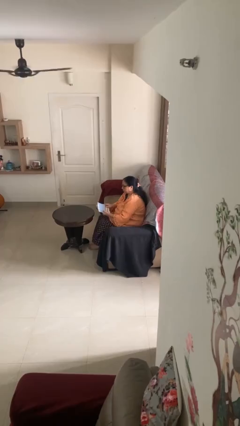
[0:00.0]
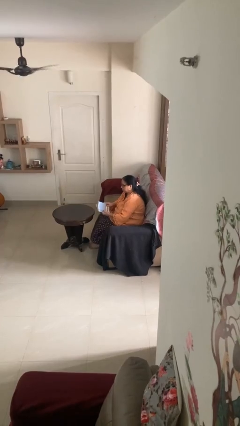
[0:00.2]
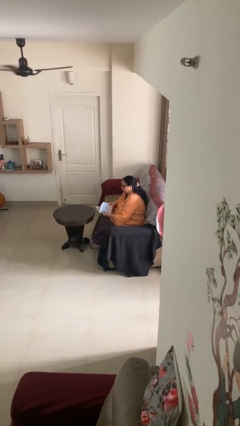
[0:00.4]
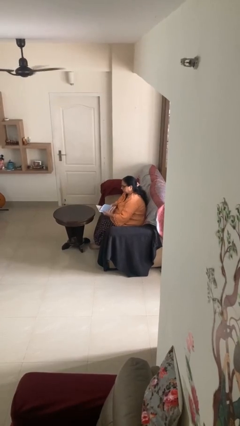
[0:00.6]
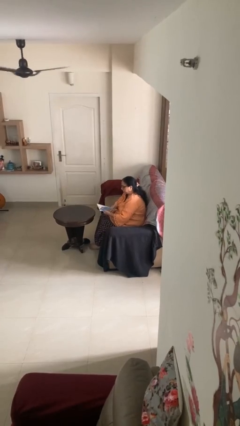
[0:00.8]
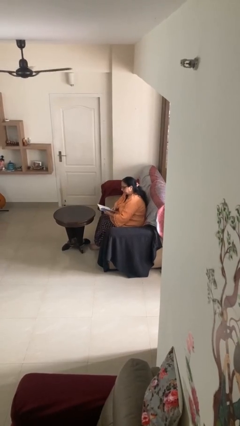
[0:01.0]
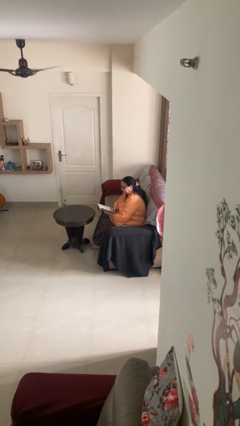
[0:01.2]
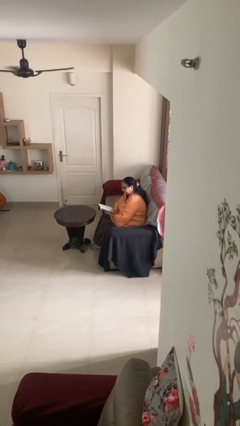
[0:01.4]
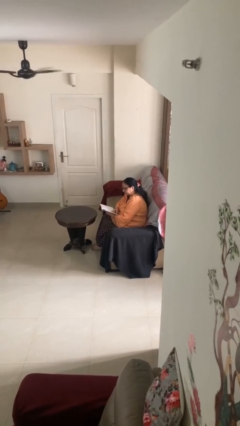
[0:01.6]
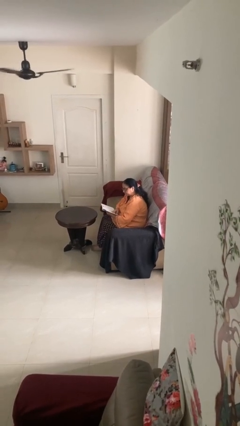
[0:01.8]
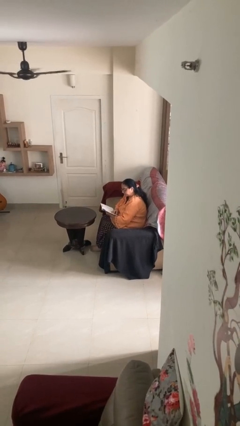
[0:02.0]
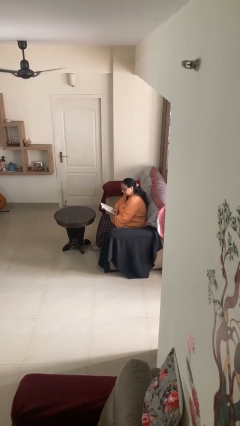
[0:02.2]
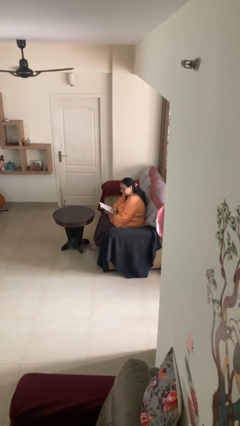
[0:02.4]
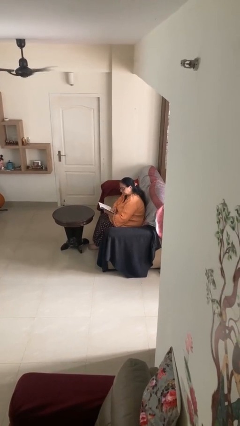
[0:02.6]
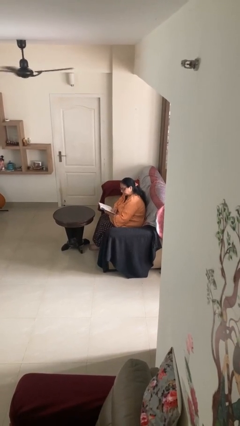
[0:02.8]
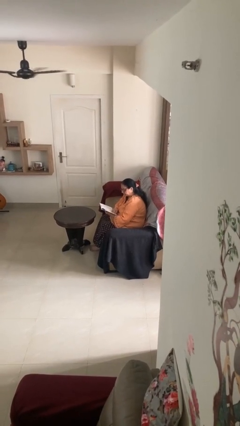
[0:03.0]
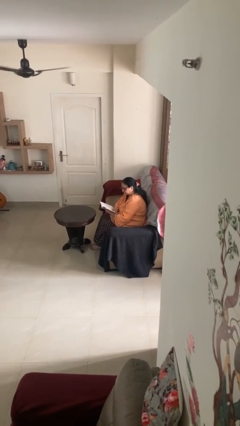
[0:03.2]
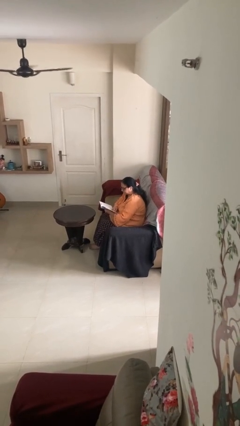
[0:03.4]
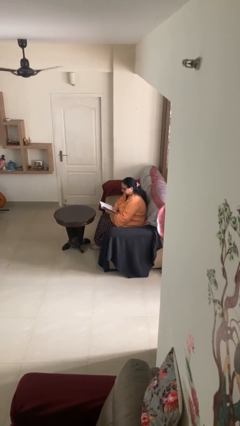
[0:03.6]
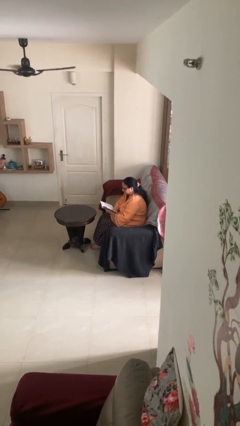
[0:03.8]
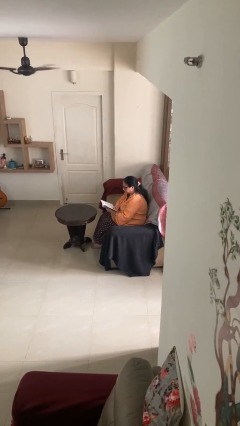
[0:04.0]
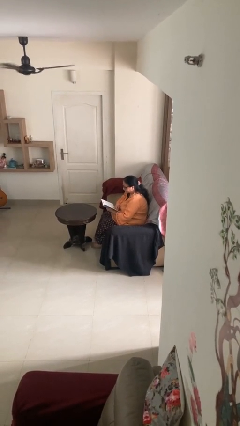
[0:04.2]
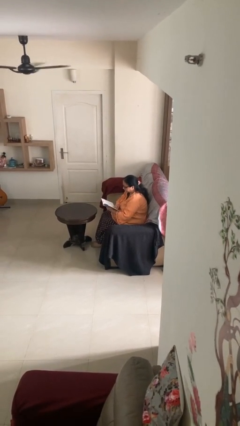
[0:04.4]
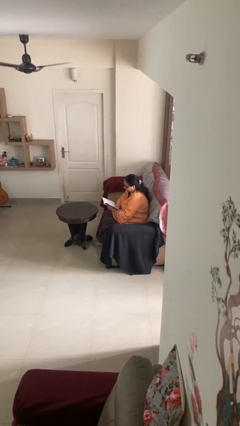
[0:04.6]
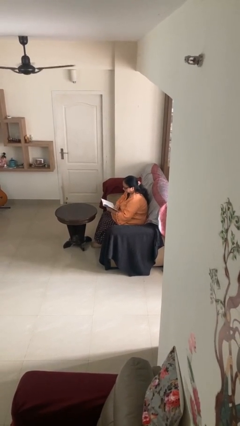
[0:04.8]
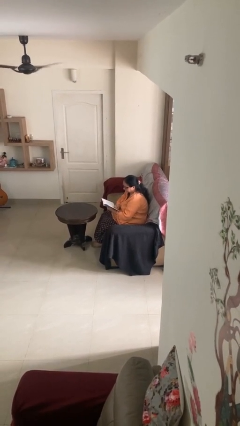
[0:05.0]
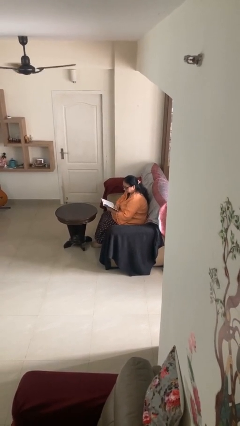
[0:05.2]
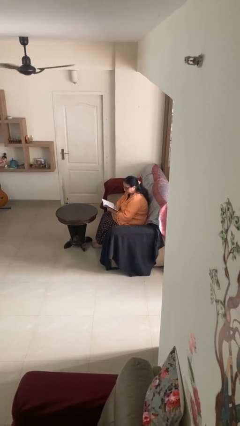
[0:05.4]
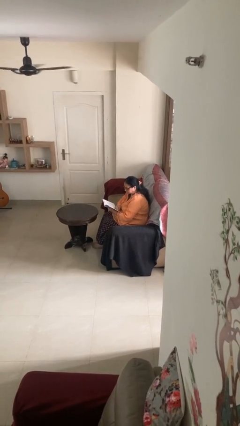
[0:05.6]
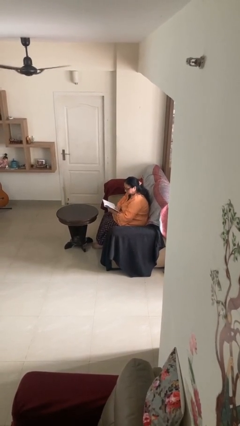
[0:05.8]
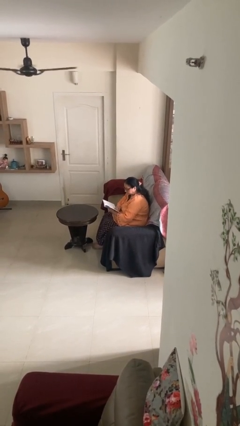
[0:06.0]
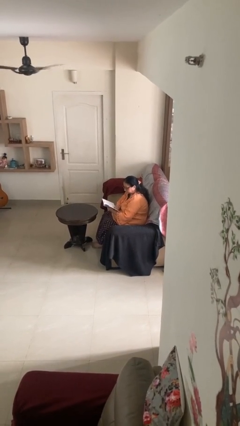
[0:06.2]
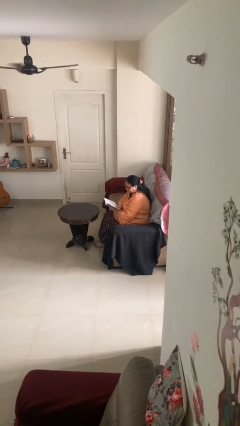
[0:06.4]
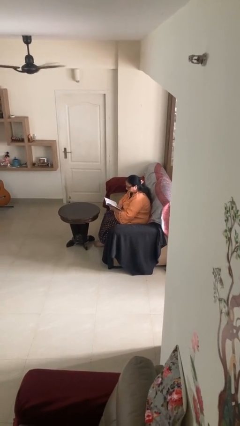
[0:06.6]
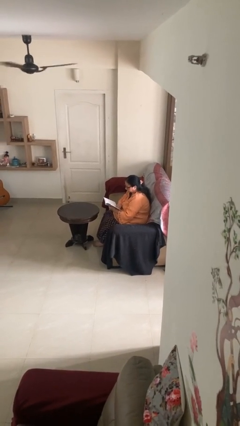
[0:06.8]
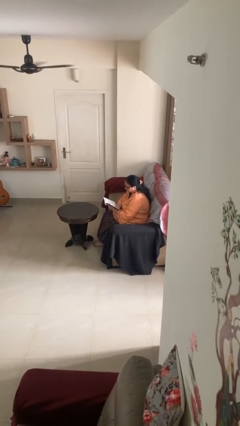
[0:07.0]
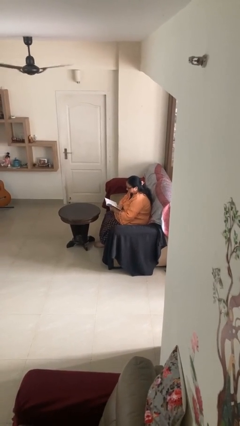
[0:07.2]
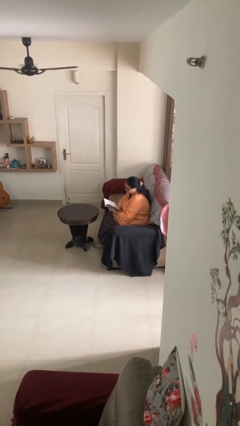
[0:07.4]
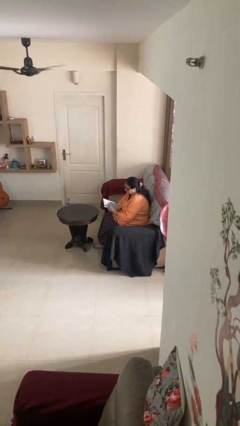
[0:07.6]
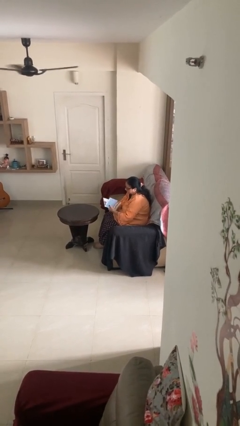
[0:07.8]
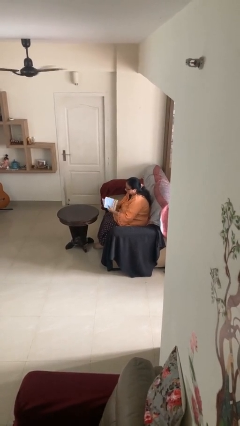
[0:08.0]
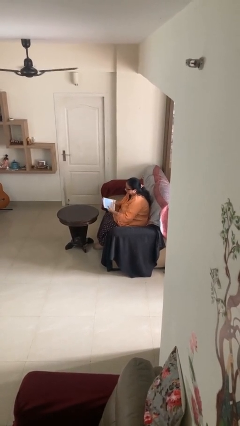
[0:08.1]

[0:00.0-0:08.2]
person reads document

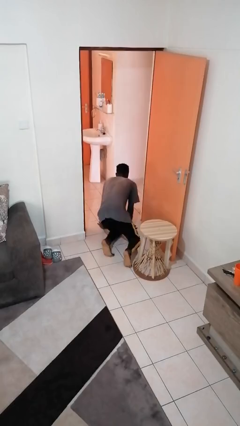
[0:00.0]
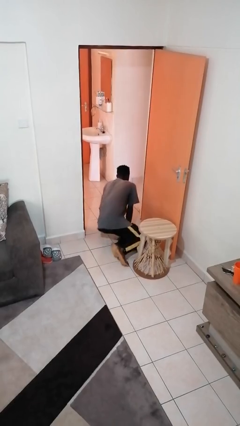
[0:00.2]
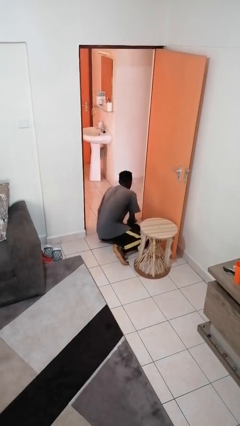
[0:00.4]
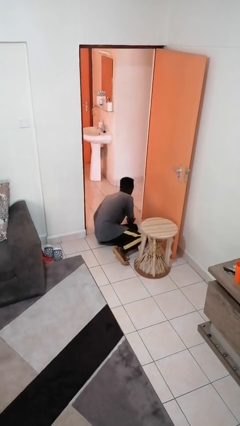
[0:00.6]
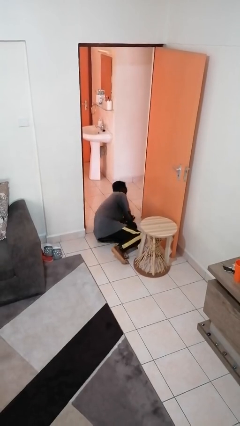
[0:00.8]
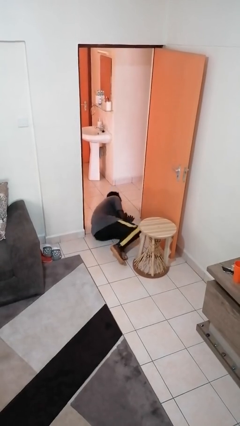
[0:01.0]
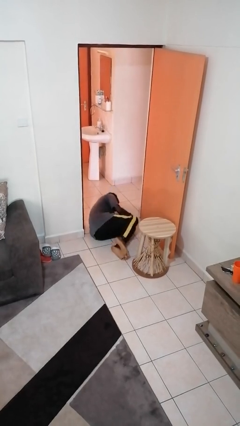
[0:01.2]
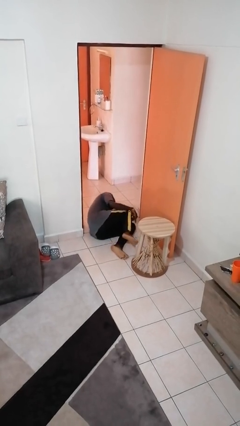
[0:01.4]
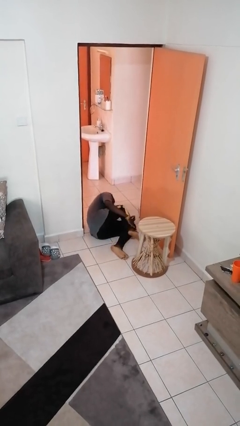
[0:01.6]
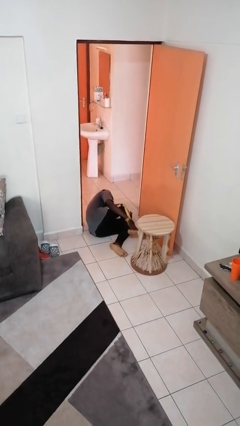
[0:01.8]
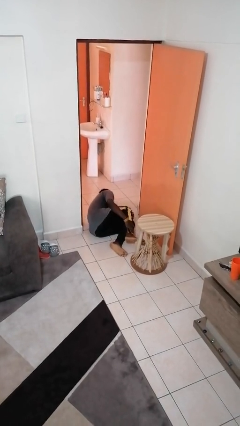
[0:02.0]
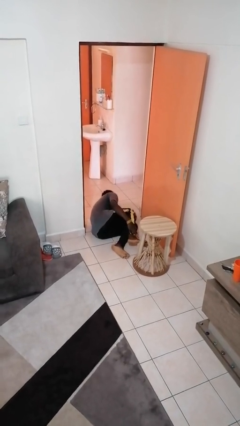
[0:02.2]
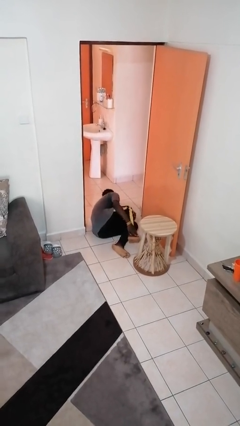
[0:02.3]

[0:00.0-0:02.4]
person lies down on floor

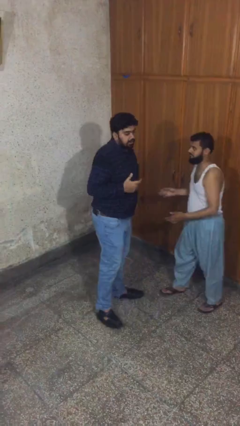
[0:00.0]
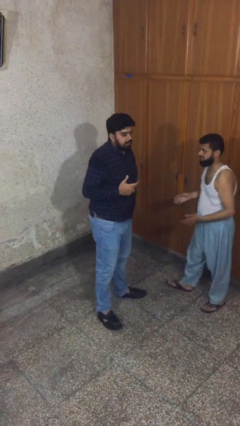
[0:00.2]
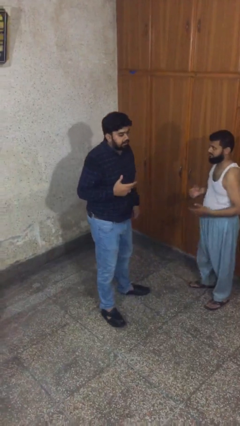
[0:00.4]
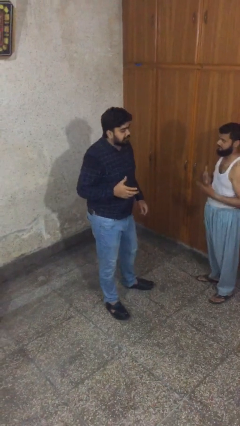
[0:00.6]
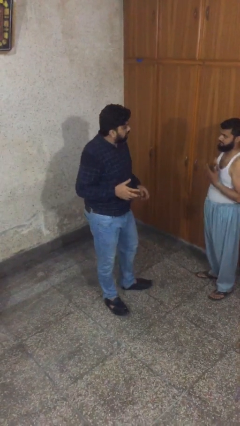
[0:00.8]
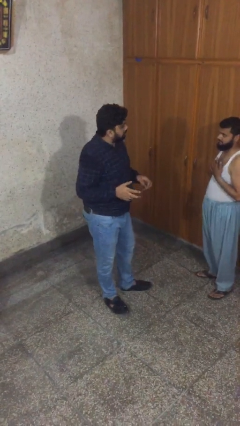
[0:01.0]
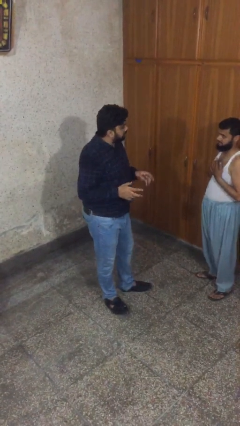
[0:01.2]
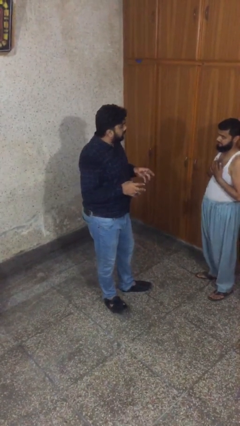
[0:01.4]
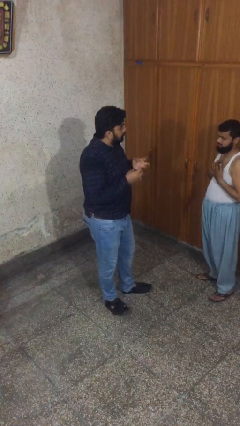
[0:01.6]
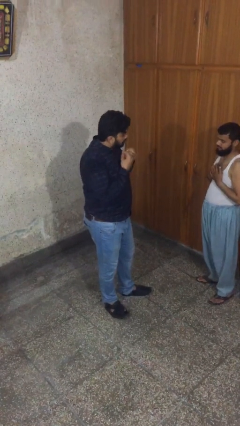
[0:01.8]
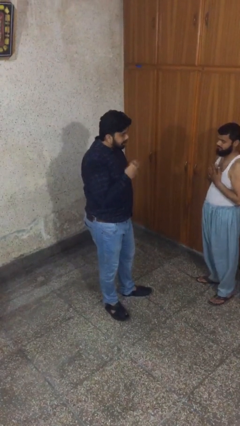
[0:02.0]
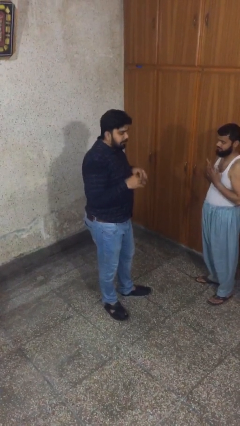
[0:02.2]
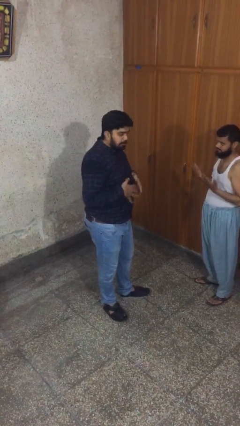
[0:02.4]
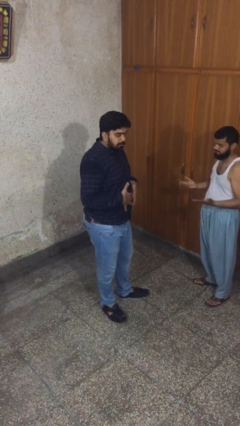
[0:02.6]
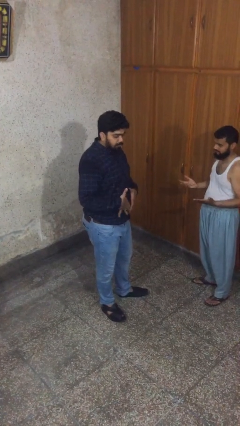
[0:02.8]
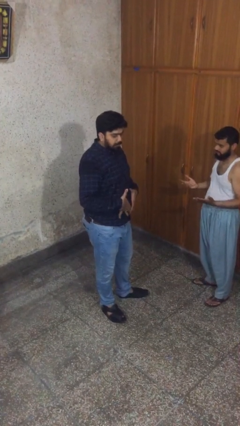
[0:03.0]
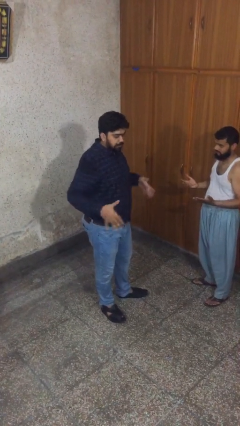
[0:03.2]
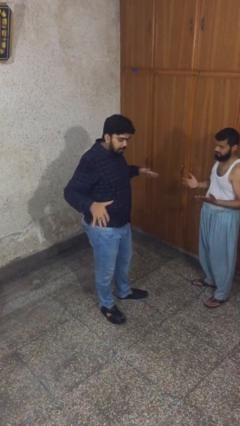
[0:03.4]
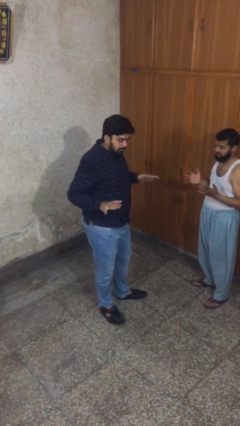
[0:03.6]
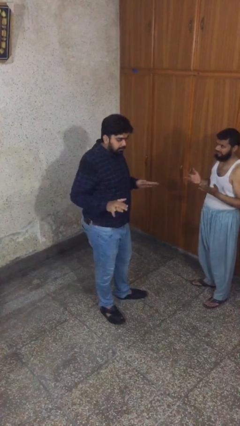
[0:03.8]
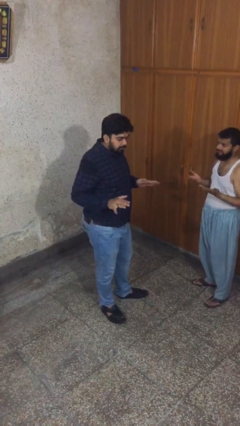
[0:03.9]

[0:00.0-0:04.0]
person talks to person

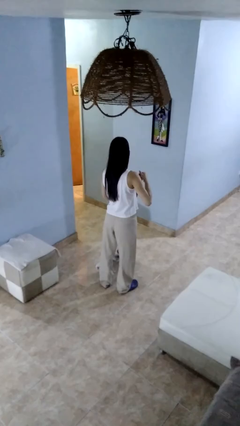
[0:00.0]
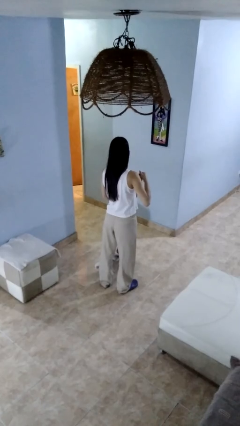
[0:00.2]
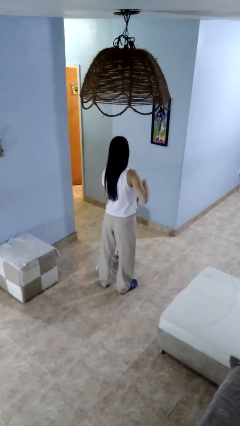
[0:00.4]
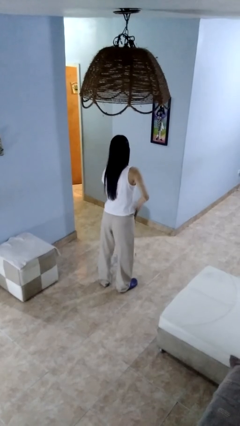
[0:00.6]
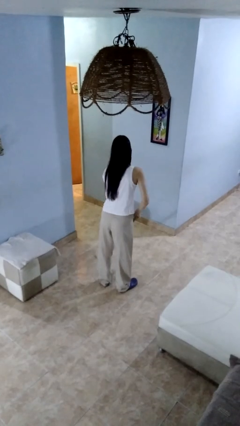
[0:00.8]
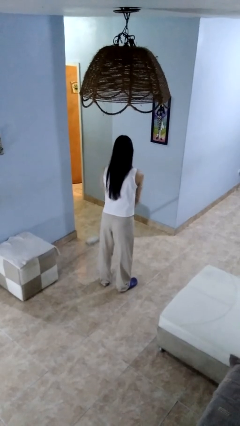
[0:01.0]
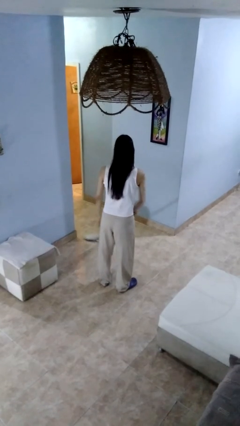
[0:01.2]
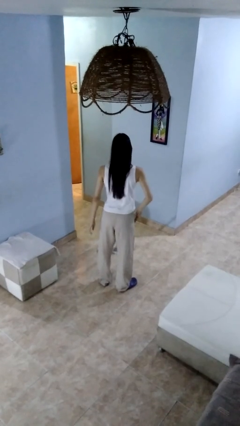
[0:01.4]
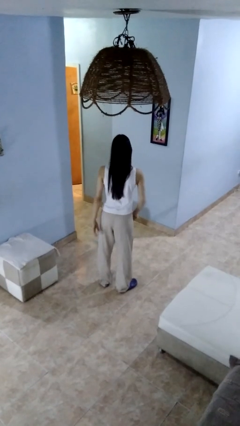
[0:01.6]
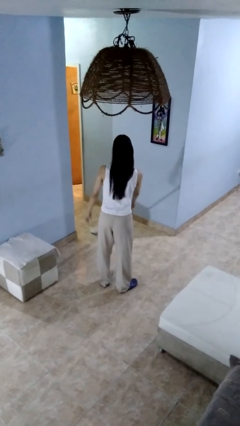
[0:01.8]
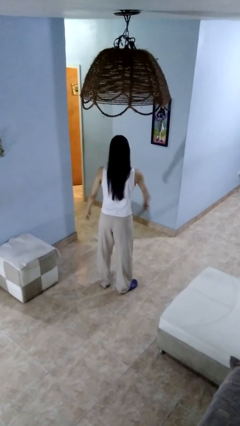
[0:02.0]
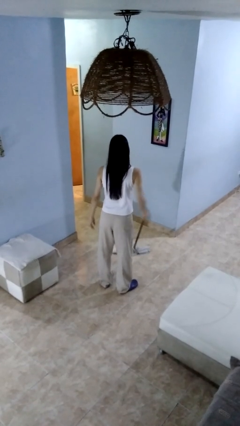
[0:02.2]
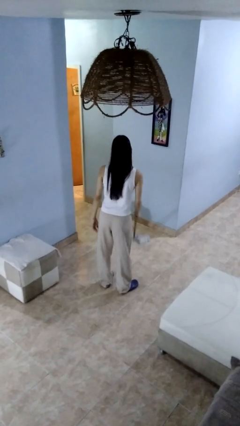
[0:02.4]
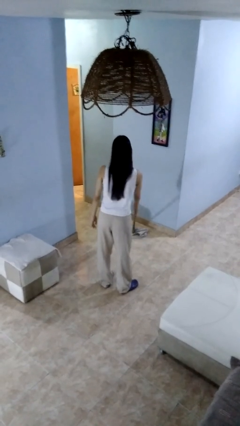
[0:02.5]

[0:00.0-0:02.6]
person mops
